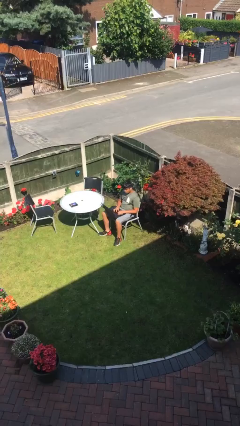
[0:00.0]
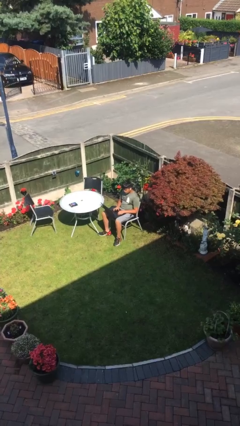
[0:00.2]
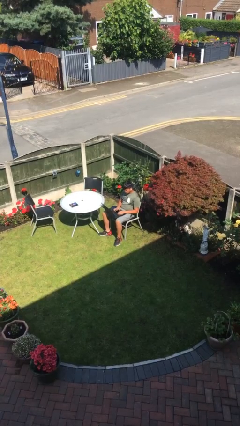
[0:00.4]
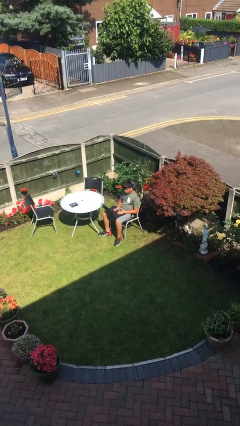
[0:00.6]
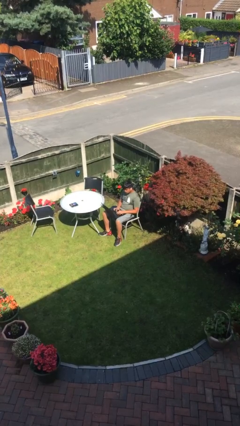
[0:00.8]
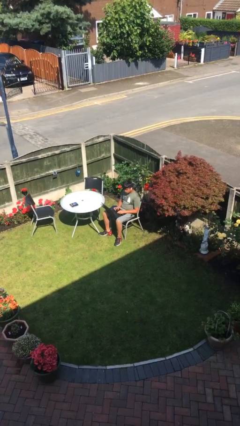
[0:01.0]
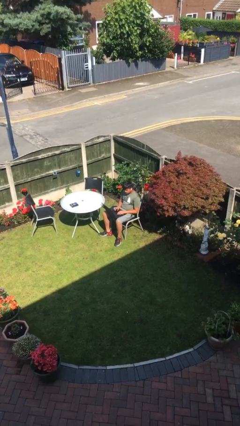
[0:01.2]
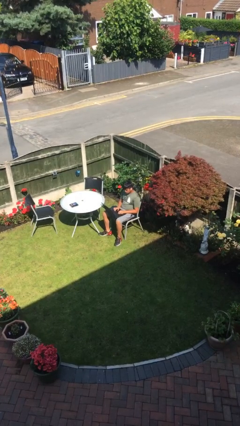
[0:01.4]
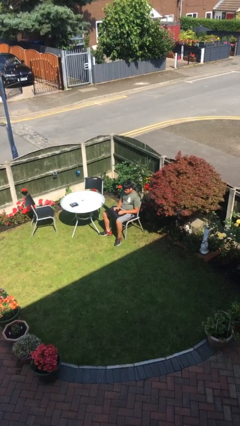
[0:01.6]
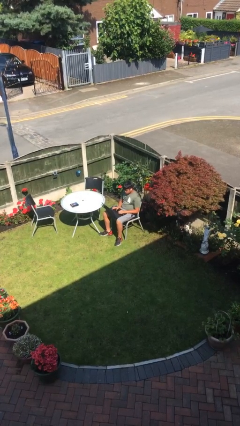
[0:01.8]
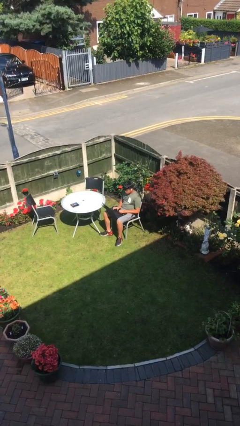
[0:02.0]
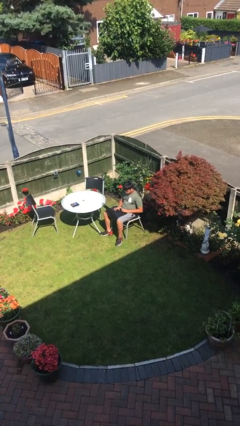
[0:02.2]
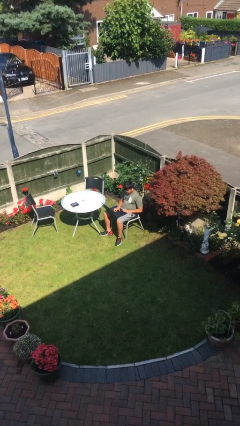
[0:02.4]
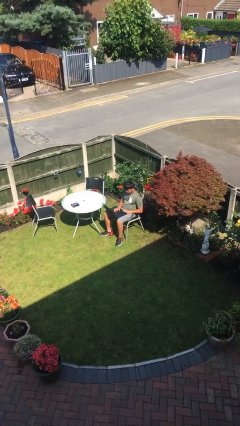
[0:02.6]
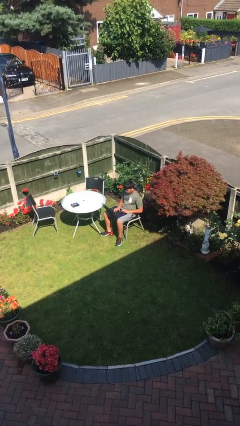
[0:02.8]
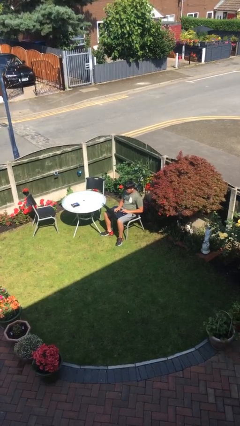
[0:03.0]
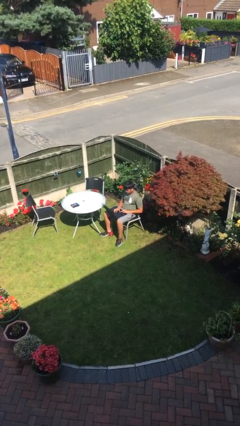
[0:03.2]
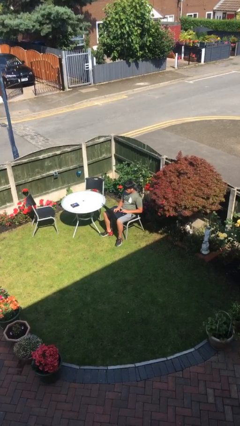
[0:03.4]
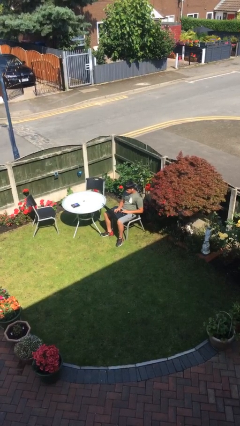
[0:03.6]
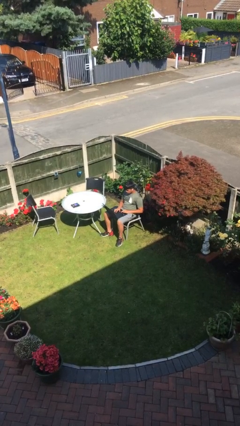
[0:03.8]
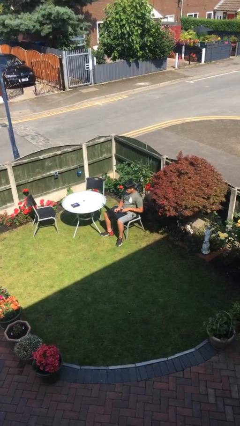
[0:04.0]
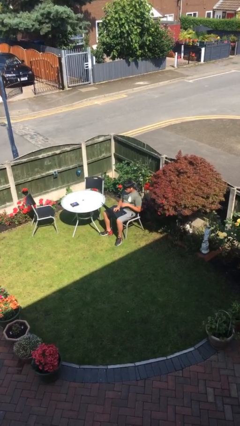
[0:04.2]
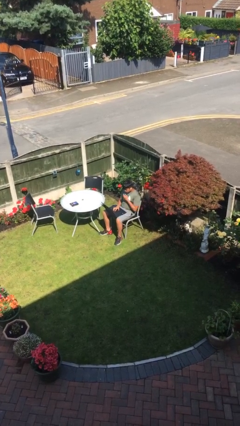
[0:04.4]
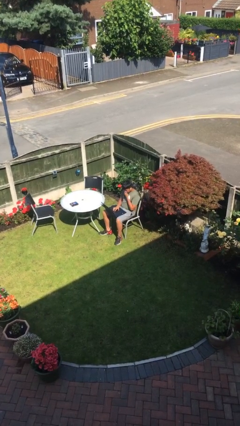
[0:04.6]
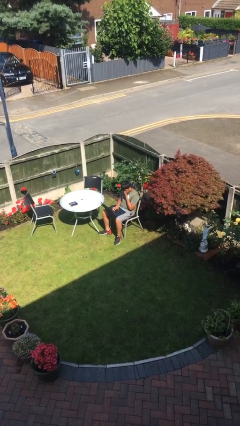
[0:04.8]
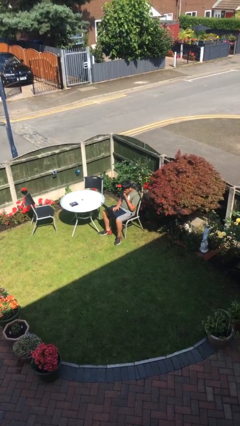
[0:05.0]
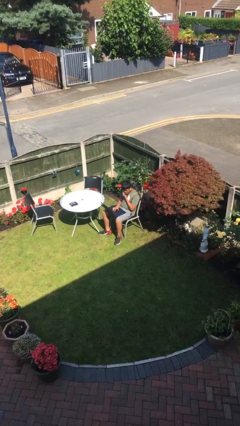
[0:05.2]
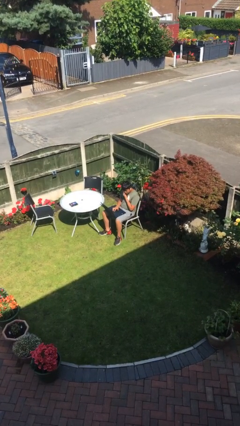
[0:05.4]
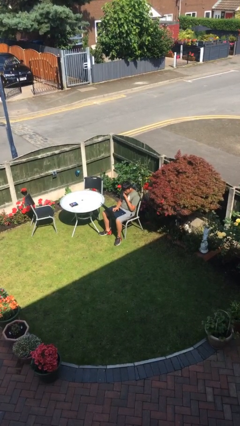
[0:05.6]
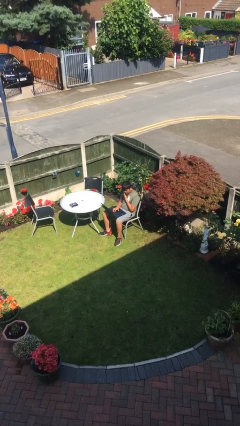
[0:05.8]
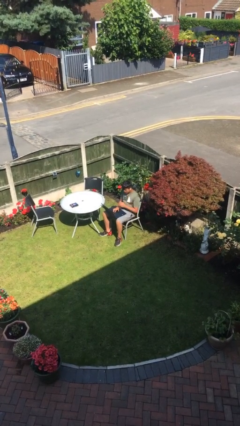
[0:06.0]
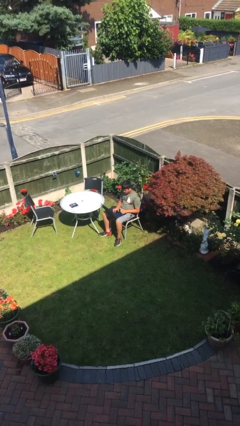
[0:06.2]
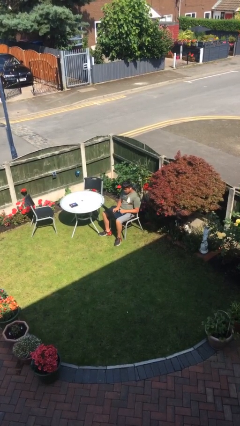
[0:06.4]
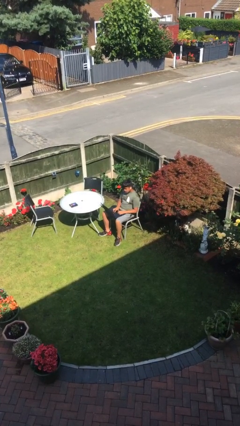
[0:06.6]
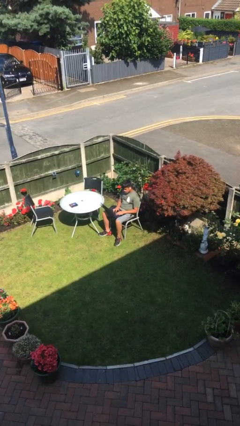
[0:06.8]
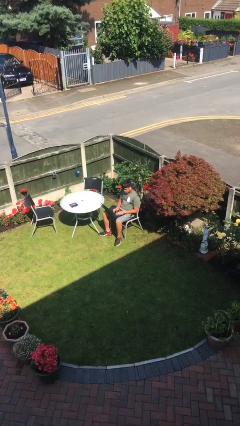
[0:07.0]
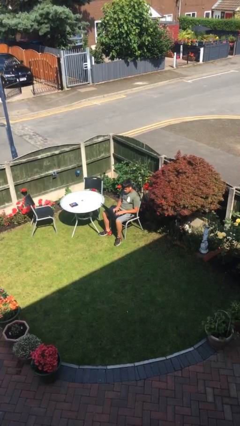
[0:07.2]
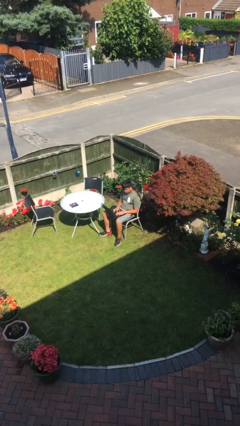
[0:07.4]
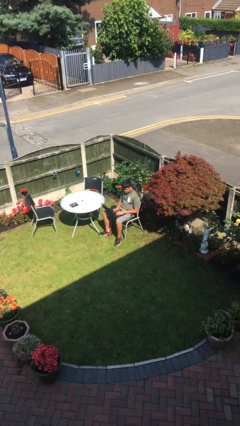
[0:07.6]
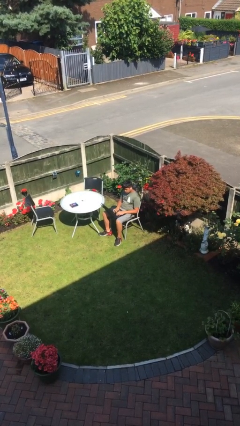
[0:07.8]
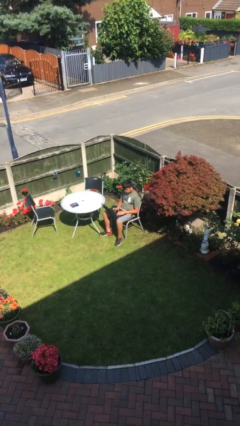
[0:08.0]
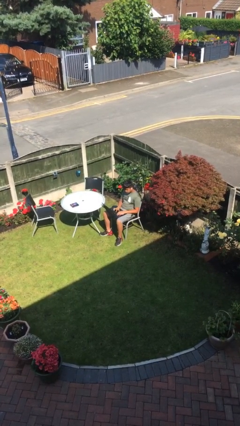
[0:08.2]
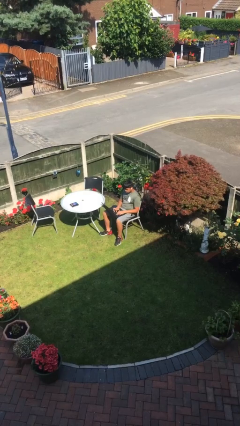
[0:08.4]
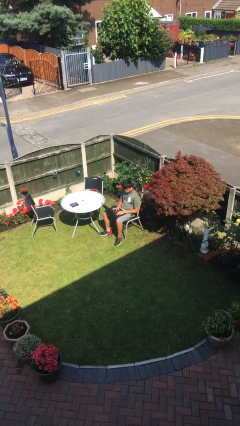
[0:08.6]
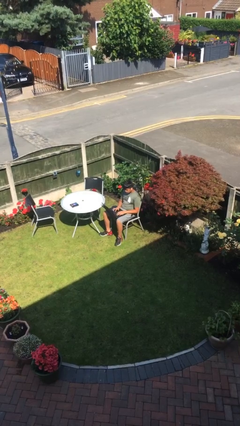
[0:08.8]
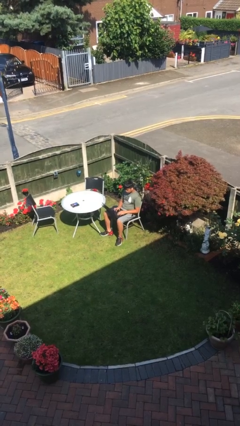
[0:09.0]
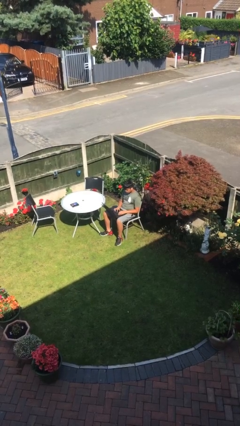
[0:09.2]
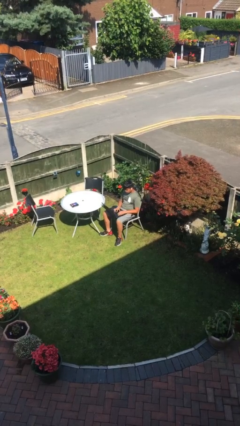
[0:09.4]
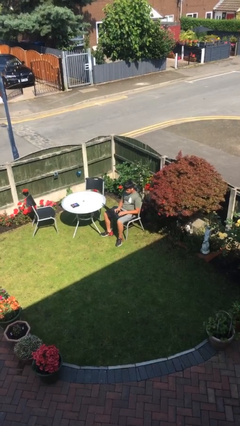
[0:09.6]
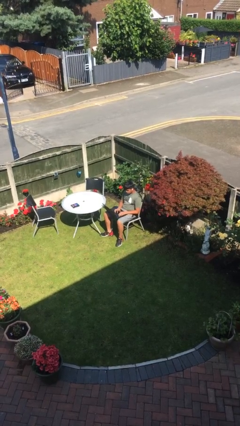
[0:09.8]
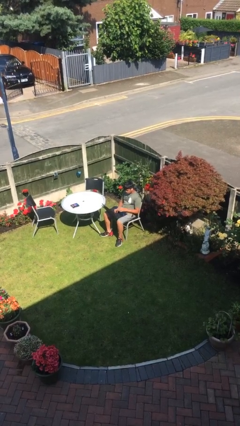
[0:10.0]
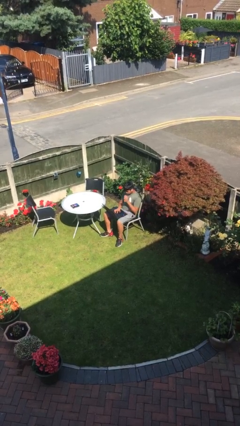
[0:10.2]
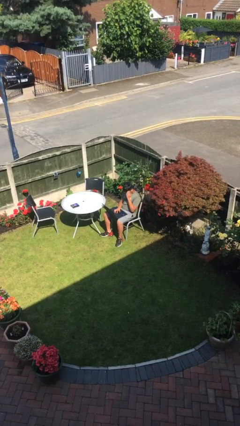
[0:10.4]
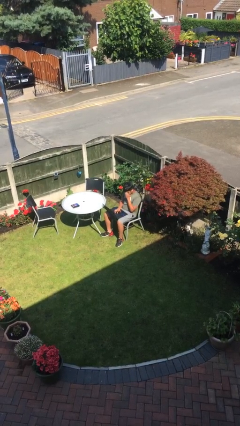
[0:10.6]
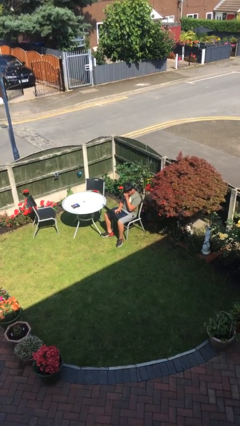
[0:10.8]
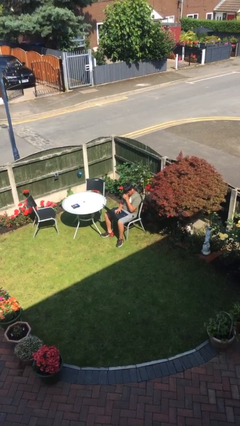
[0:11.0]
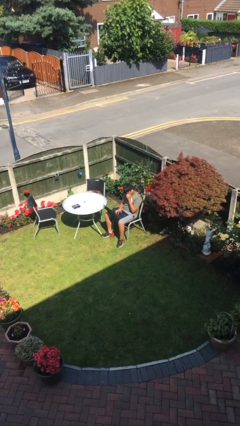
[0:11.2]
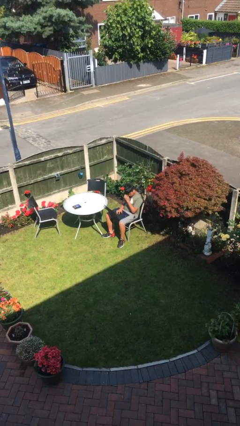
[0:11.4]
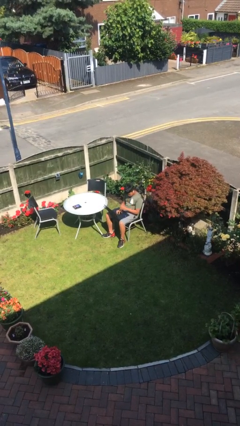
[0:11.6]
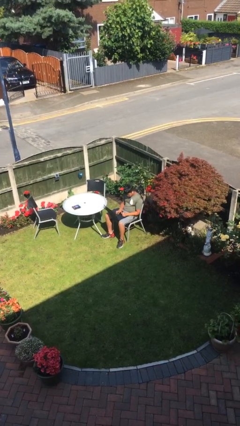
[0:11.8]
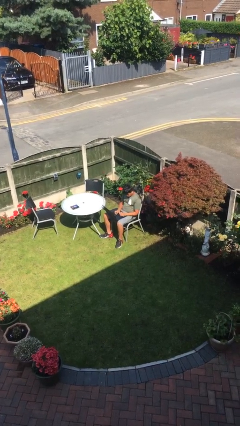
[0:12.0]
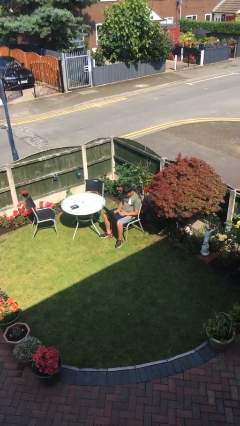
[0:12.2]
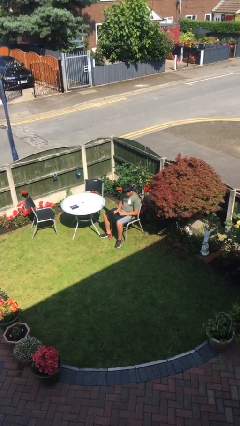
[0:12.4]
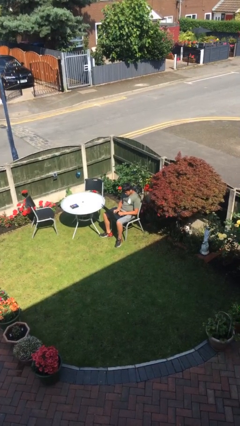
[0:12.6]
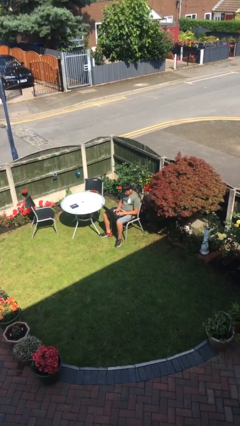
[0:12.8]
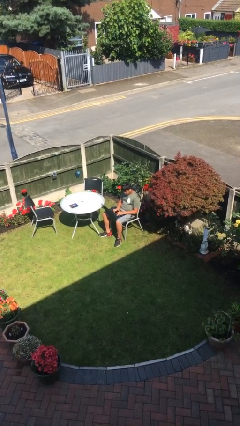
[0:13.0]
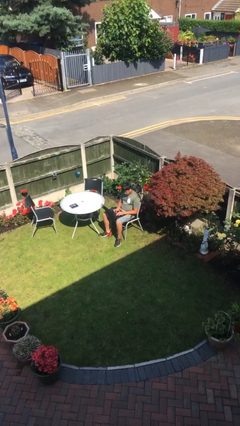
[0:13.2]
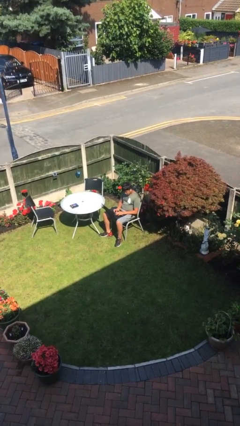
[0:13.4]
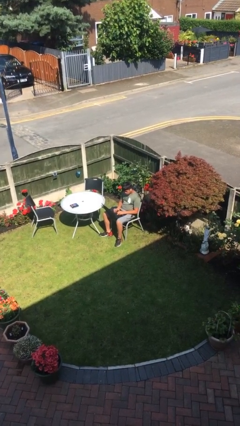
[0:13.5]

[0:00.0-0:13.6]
person interacts with laptop

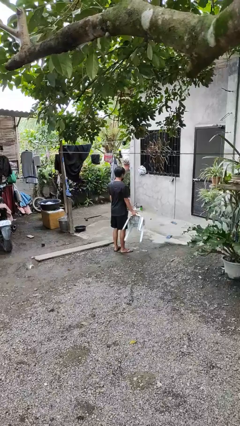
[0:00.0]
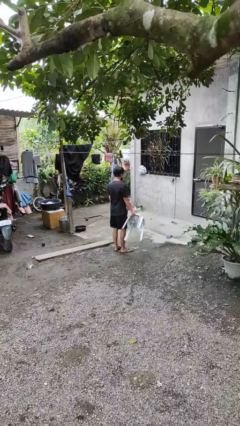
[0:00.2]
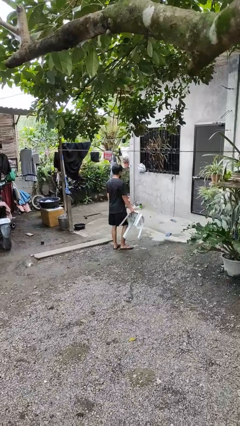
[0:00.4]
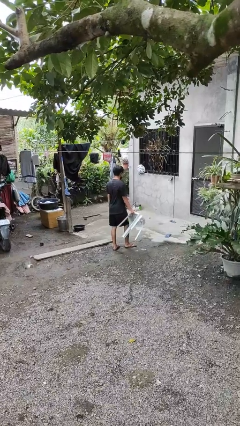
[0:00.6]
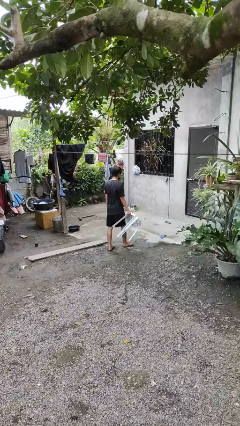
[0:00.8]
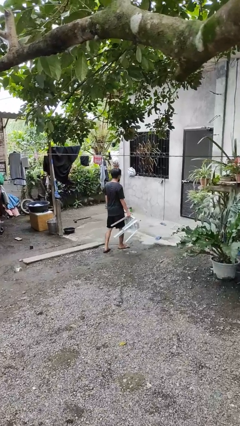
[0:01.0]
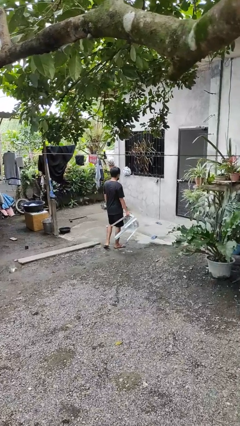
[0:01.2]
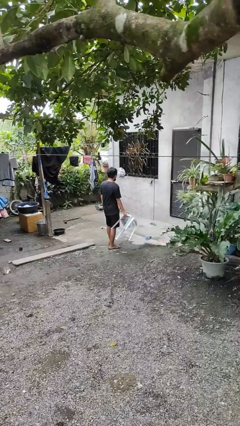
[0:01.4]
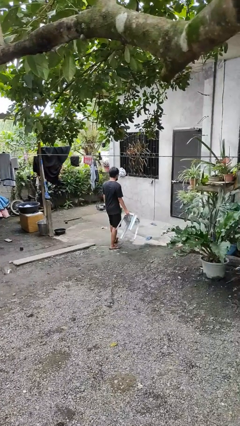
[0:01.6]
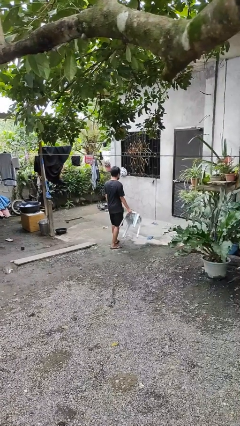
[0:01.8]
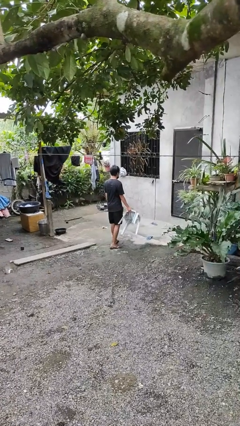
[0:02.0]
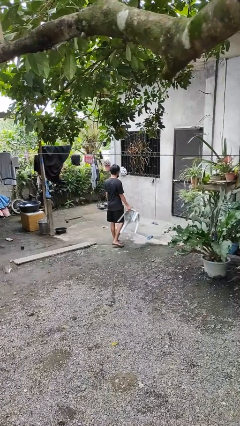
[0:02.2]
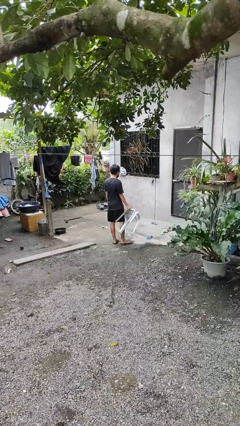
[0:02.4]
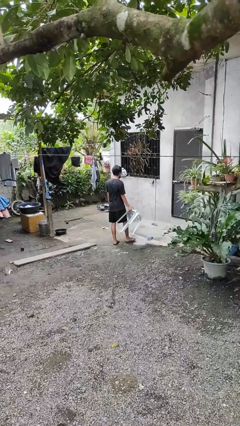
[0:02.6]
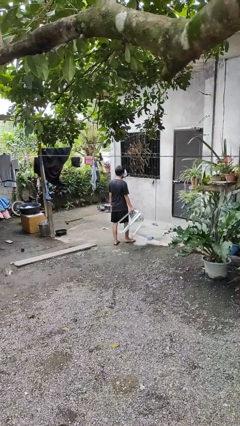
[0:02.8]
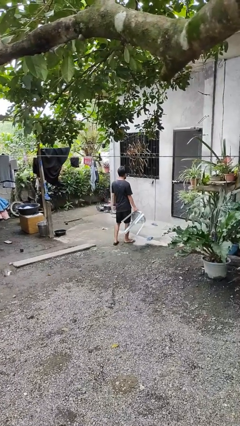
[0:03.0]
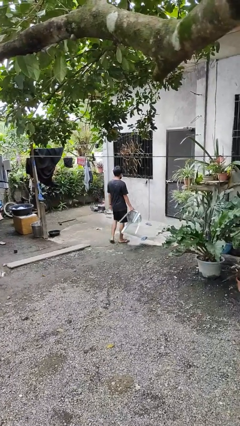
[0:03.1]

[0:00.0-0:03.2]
person carries furniture

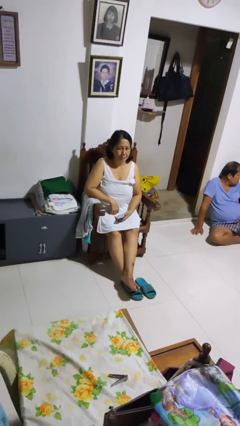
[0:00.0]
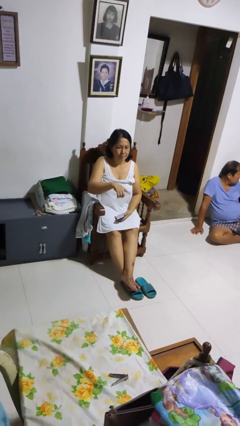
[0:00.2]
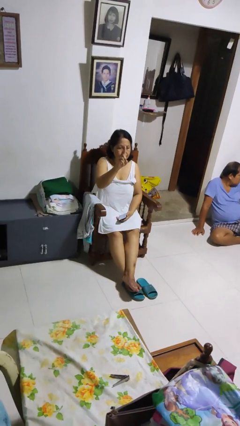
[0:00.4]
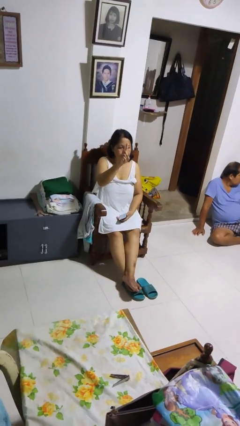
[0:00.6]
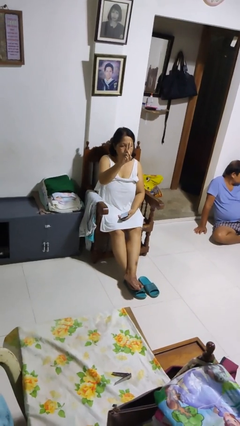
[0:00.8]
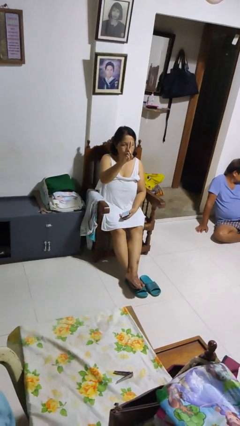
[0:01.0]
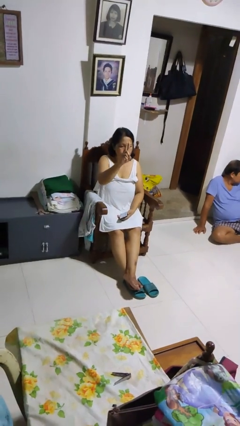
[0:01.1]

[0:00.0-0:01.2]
person gestures number one
